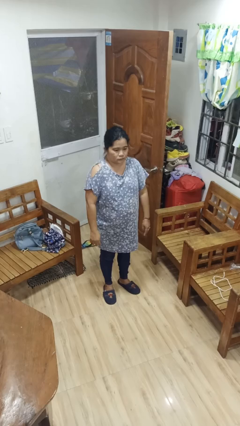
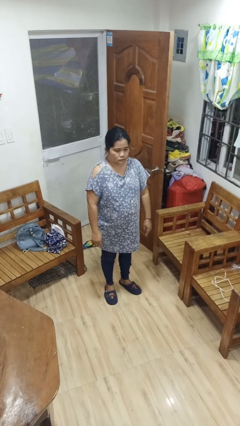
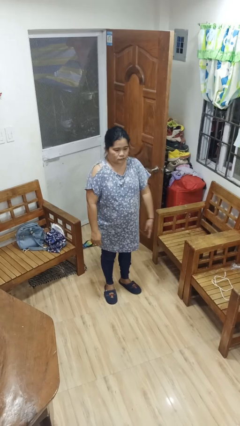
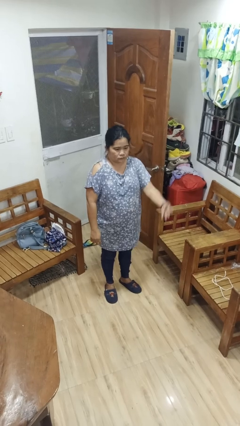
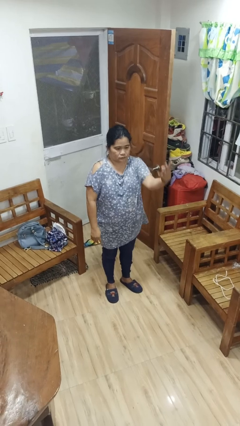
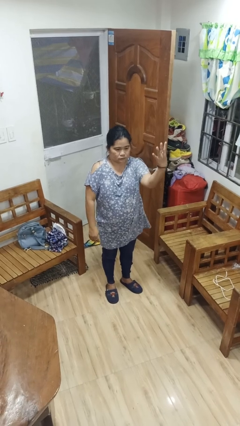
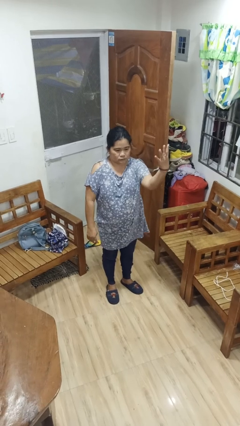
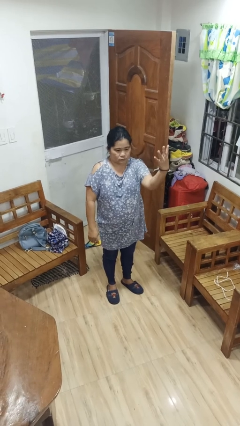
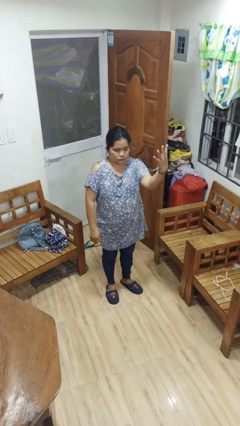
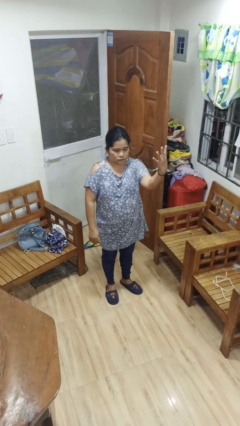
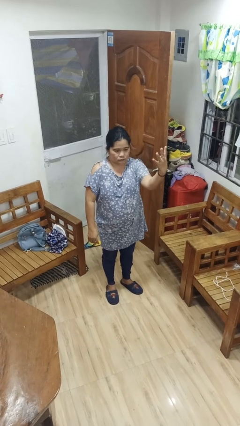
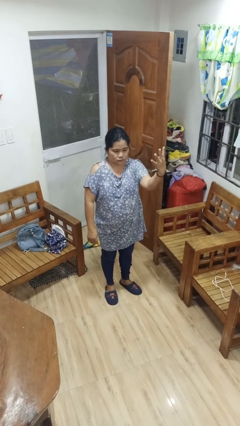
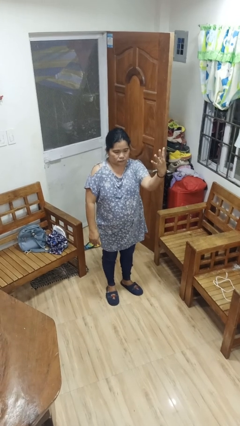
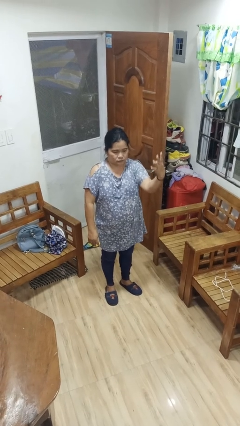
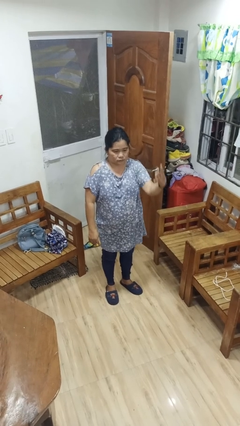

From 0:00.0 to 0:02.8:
person gestures number four

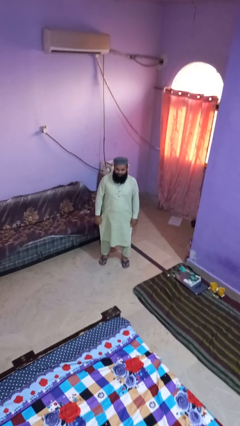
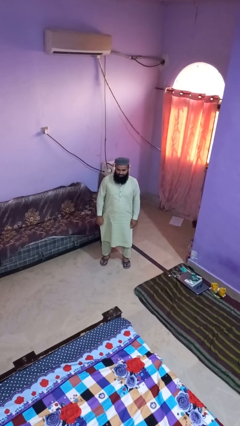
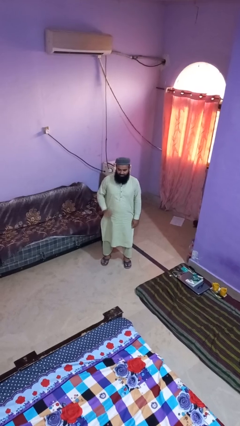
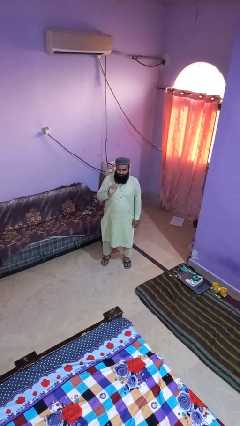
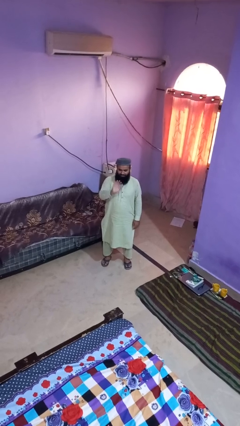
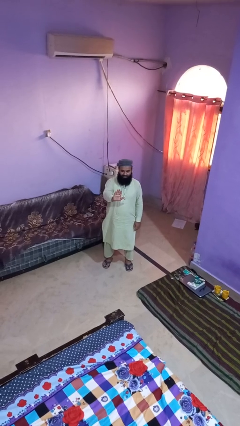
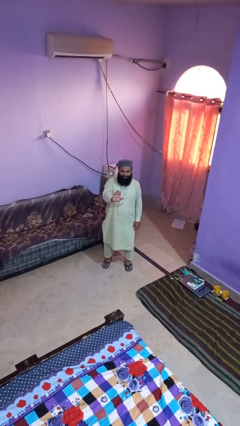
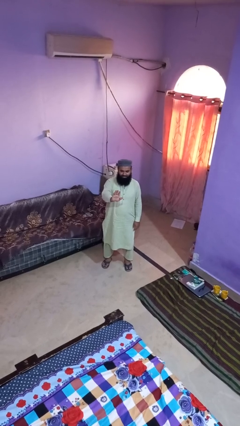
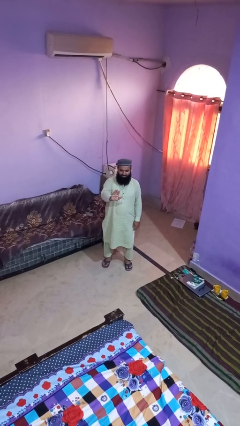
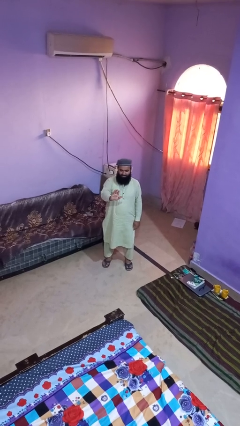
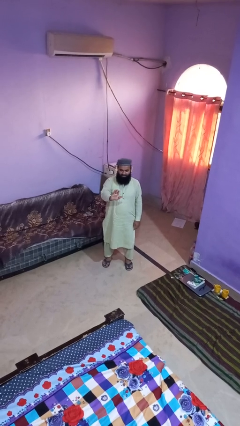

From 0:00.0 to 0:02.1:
person gestures stop

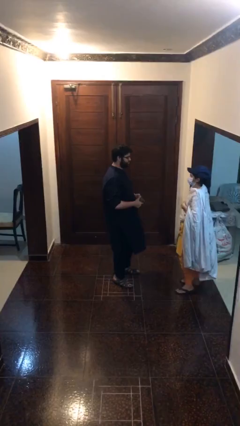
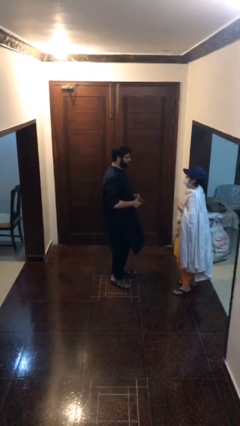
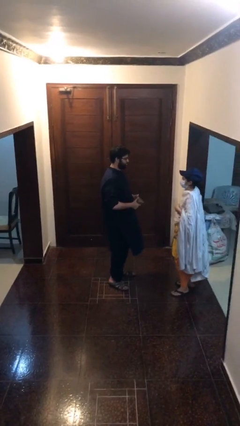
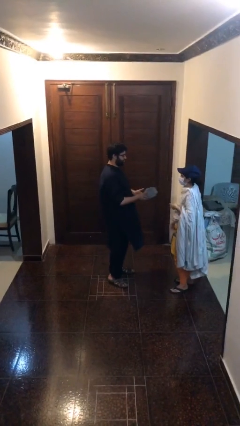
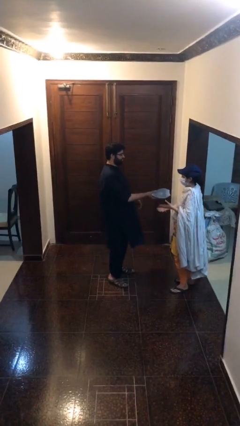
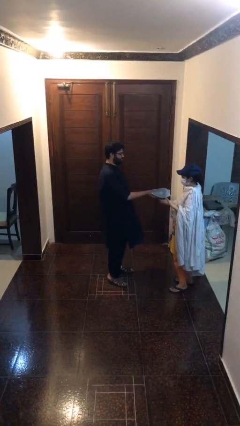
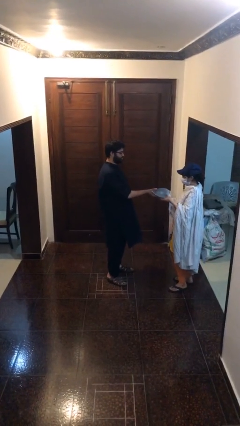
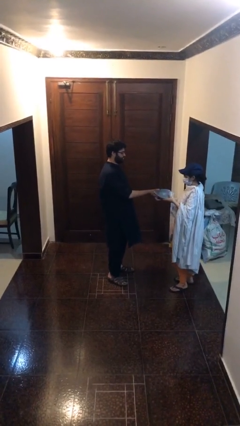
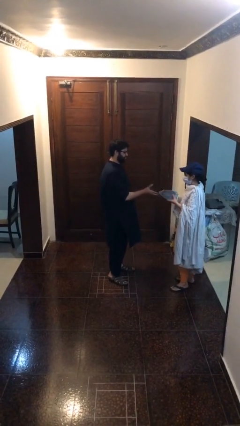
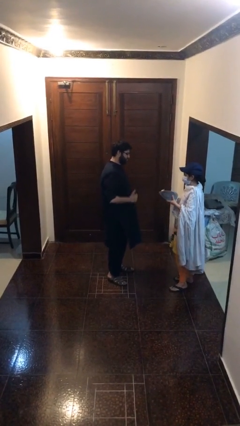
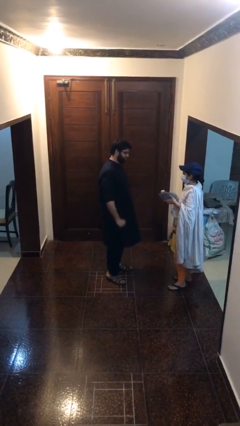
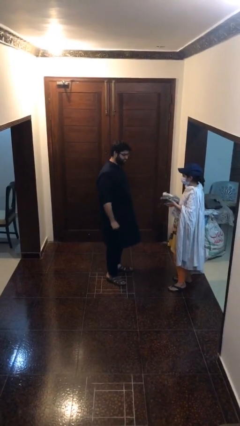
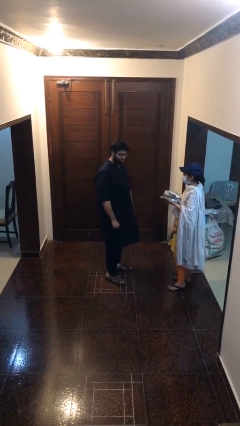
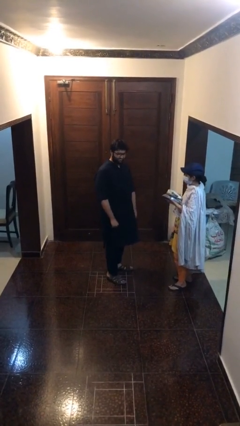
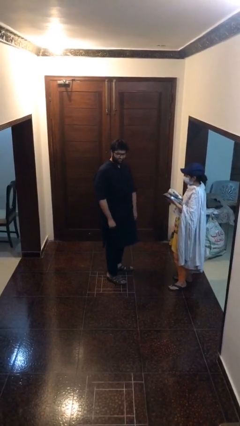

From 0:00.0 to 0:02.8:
person transfers object to person

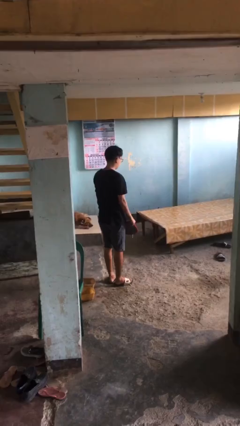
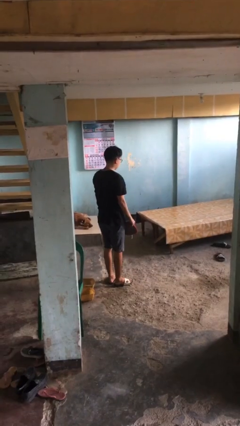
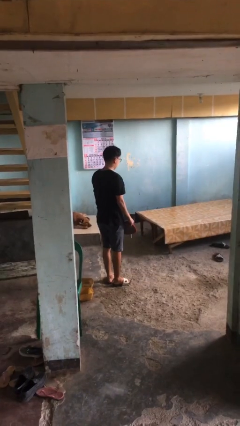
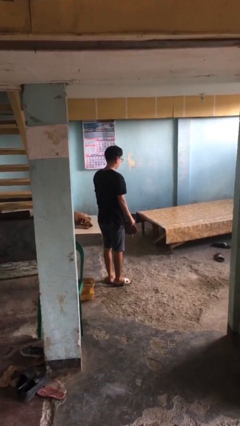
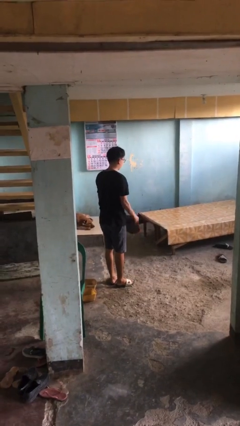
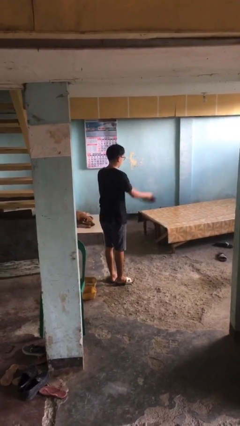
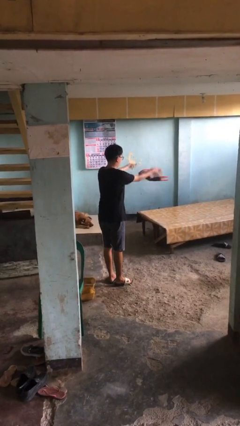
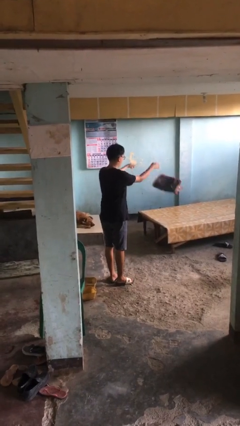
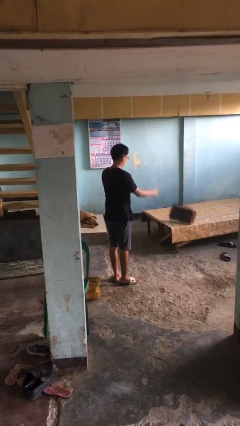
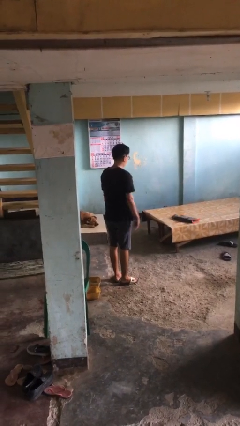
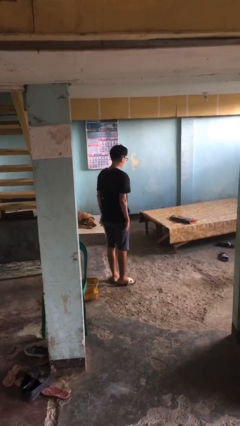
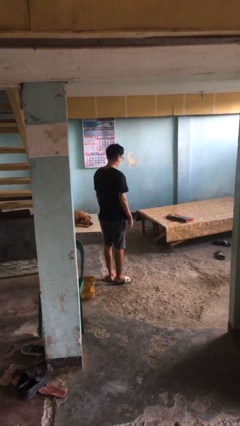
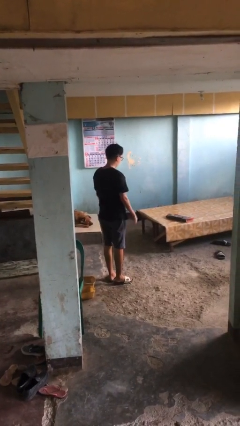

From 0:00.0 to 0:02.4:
person throws object on bed

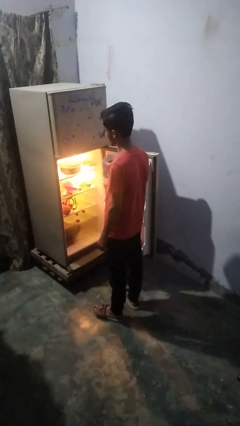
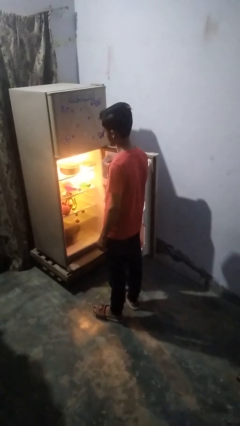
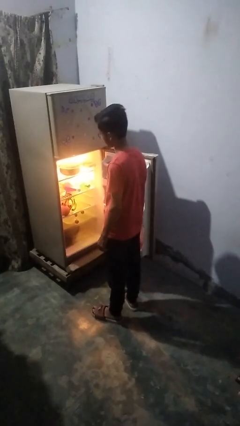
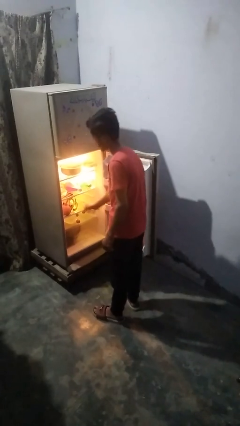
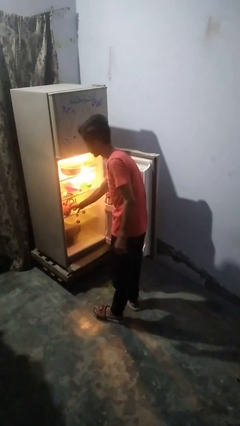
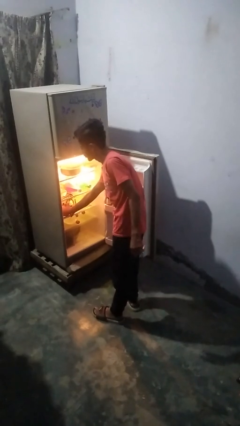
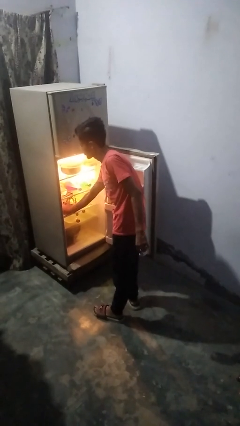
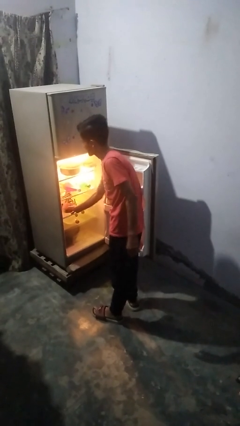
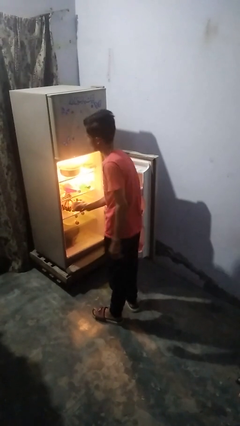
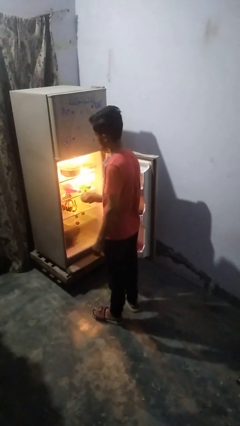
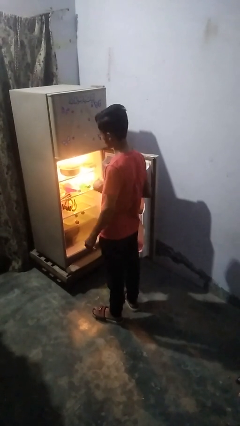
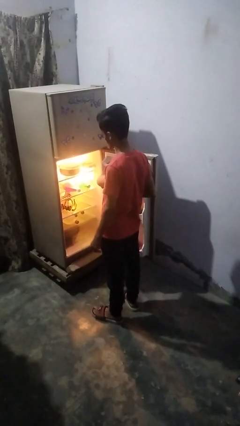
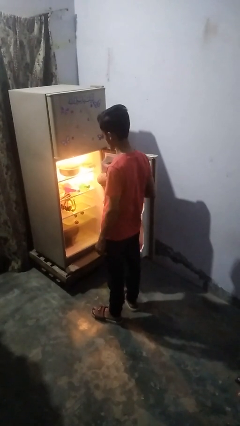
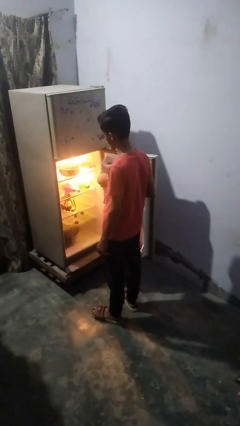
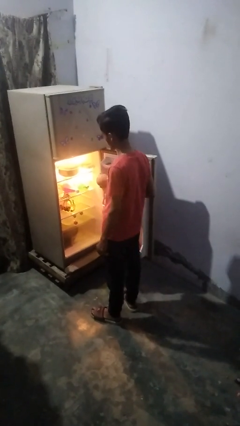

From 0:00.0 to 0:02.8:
person puts object into refrigerator

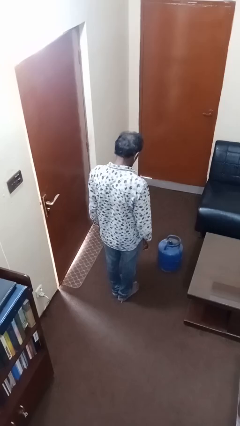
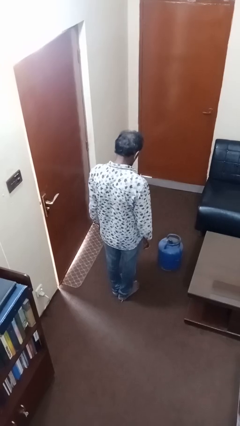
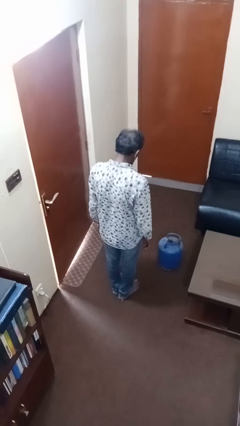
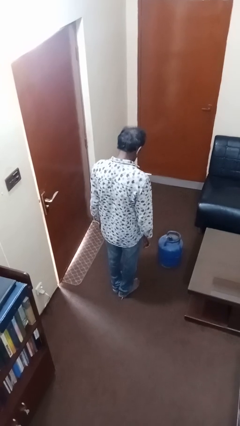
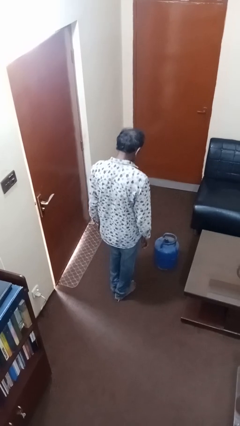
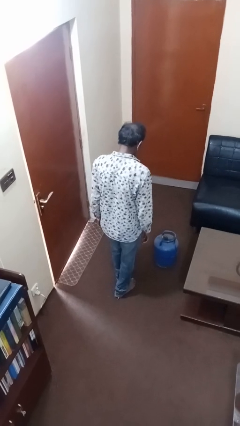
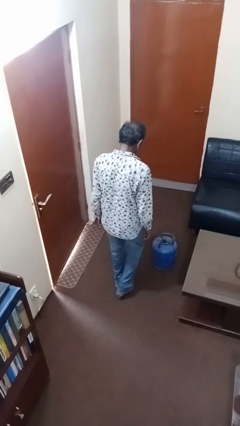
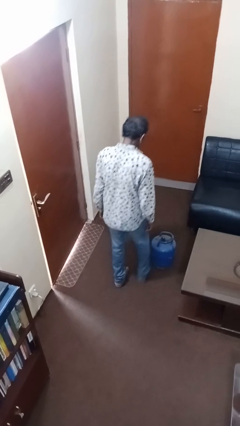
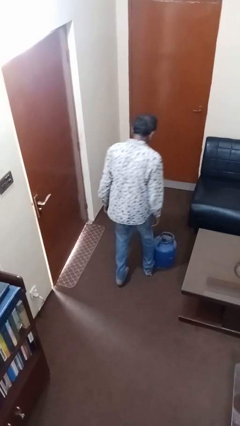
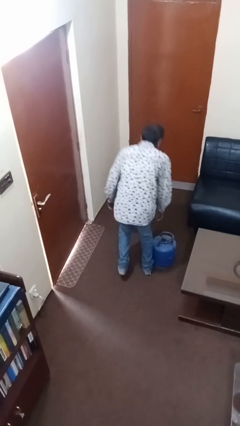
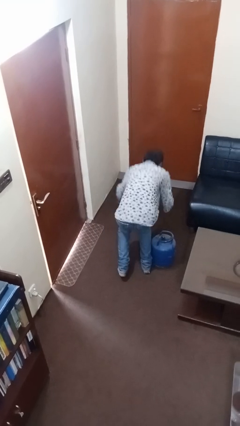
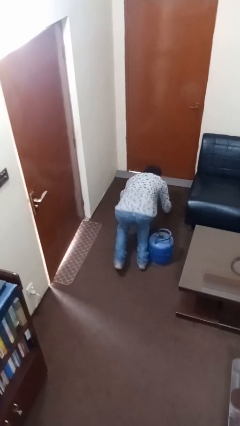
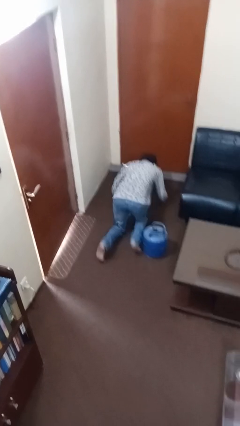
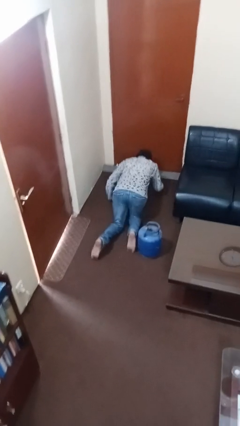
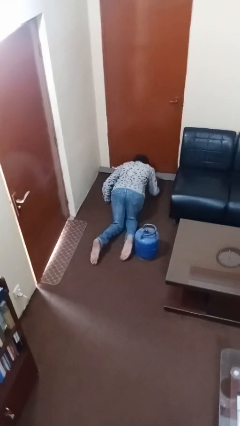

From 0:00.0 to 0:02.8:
person trips on object on floor

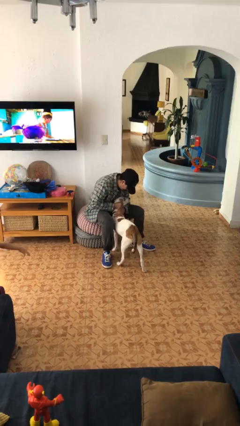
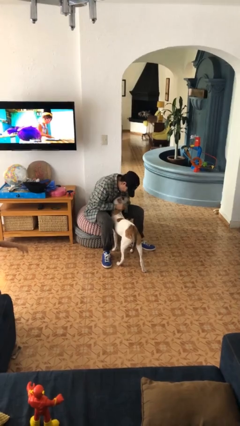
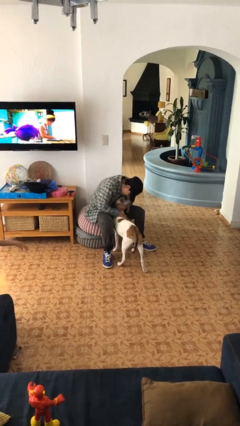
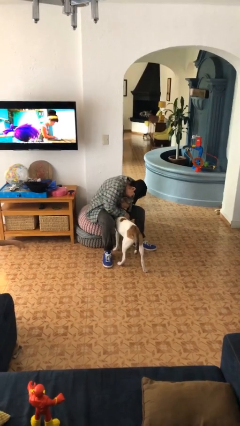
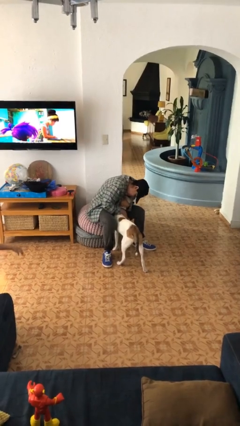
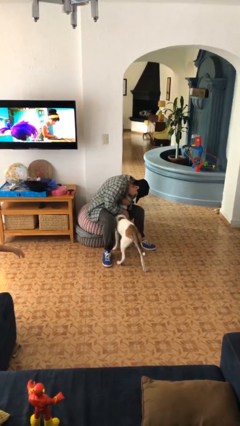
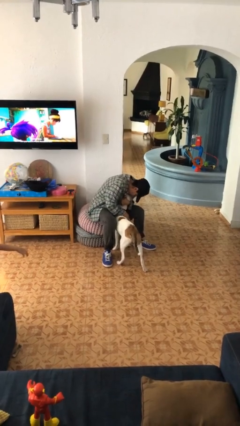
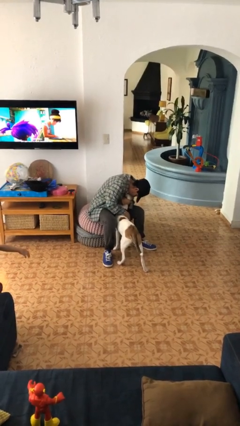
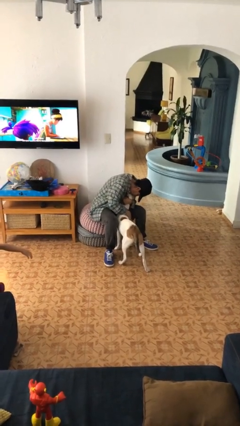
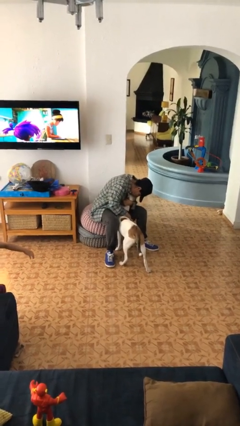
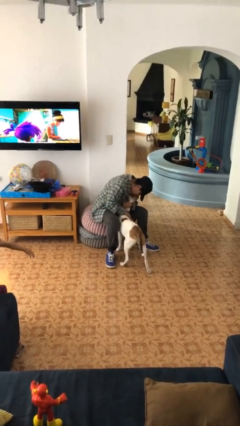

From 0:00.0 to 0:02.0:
person hugs cat
